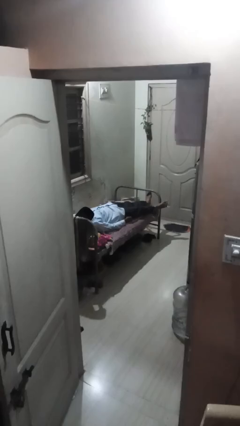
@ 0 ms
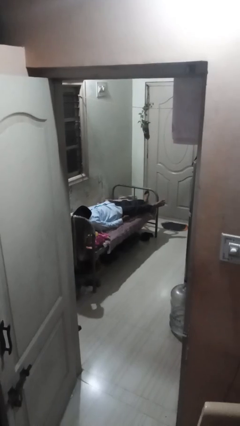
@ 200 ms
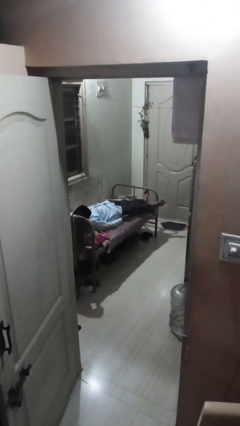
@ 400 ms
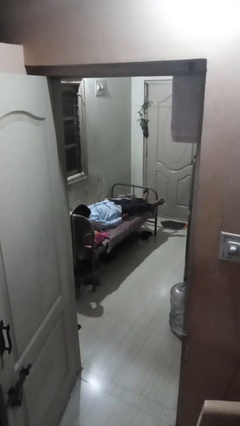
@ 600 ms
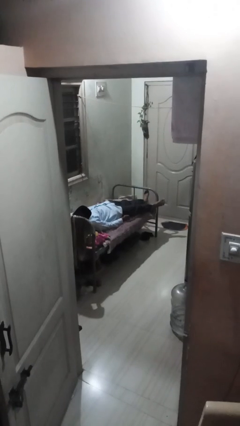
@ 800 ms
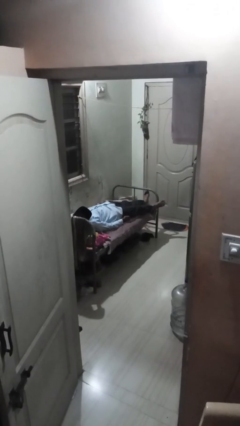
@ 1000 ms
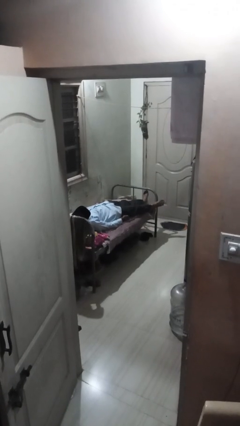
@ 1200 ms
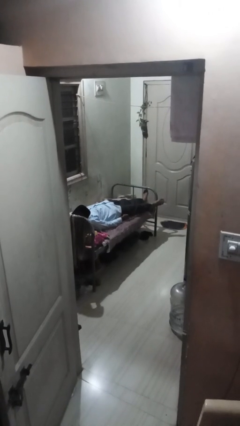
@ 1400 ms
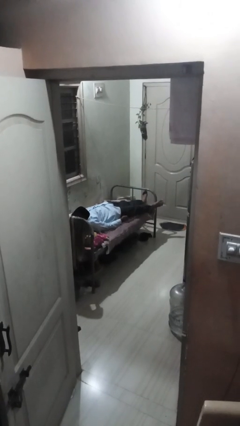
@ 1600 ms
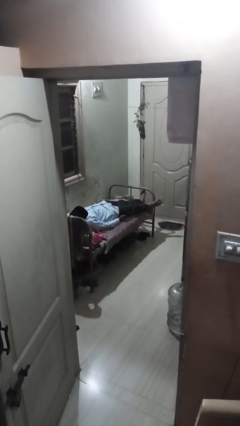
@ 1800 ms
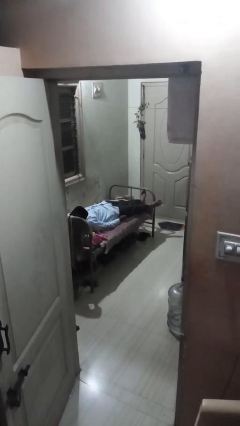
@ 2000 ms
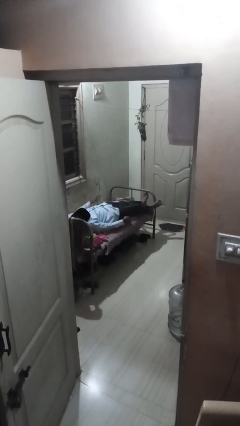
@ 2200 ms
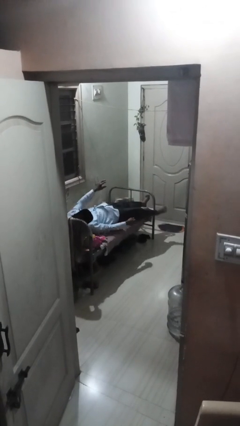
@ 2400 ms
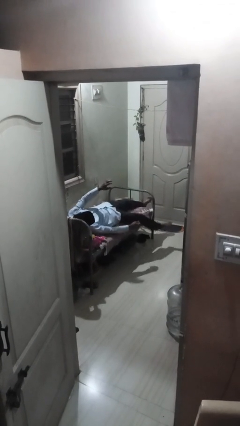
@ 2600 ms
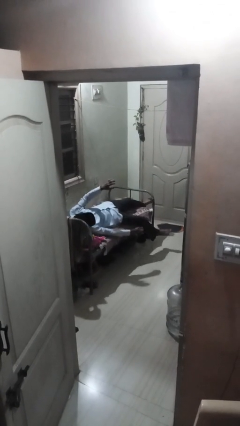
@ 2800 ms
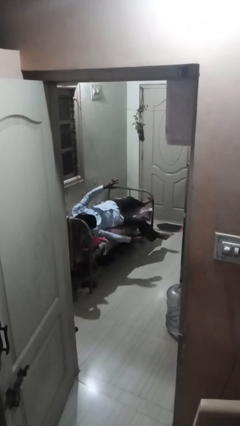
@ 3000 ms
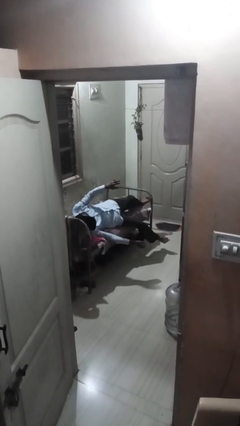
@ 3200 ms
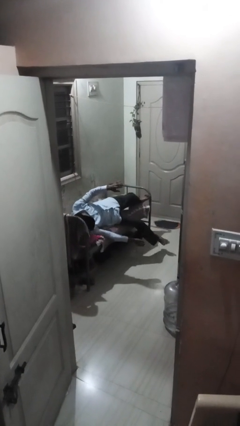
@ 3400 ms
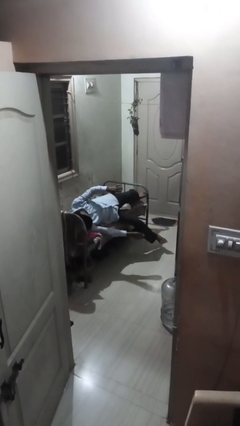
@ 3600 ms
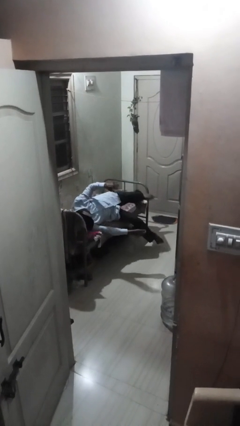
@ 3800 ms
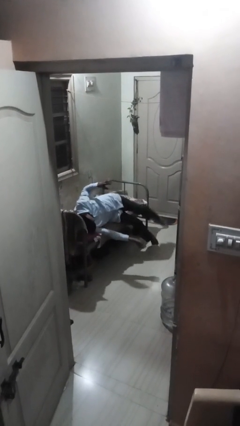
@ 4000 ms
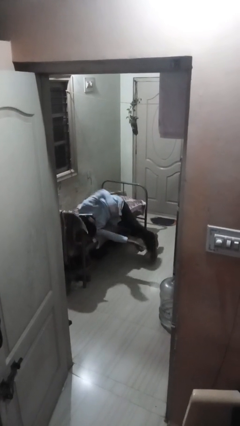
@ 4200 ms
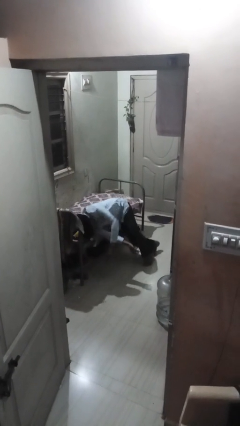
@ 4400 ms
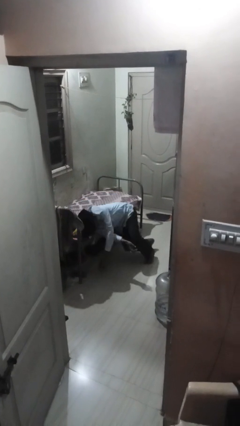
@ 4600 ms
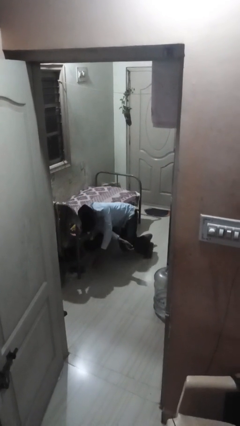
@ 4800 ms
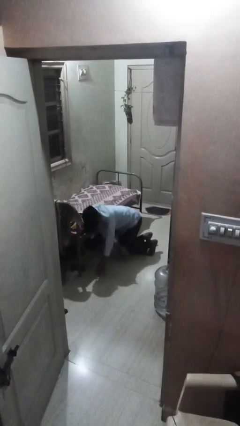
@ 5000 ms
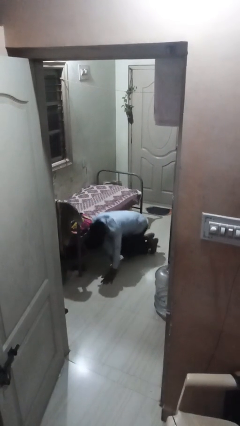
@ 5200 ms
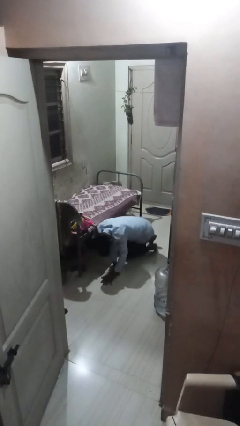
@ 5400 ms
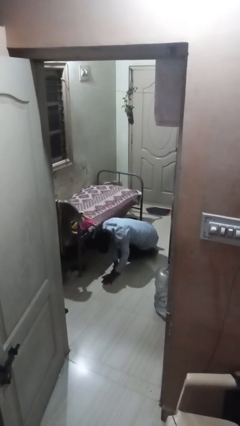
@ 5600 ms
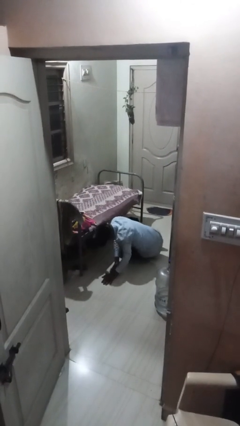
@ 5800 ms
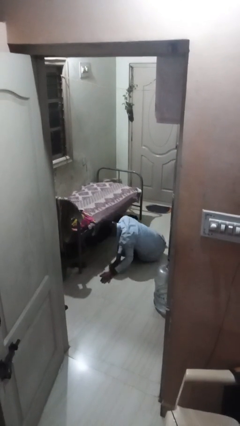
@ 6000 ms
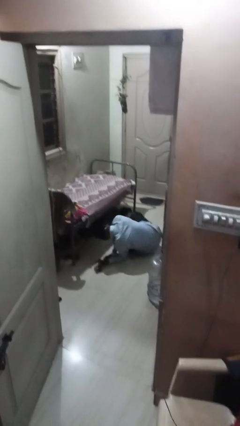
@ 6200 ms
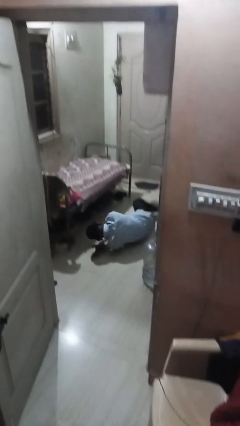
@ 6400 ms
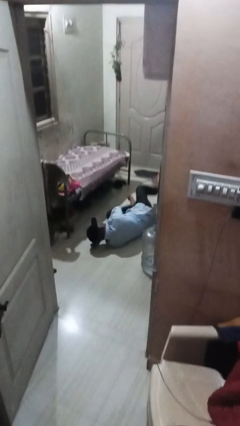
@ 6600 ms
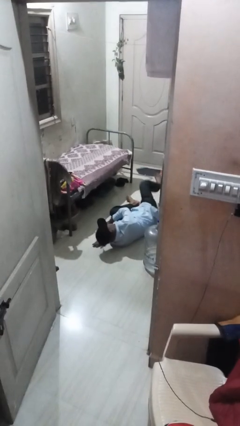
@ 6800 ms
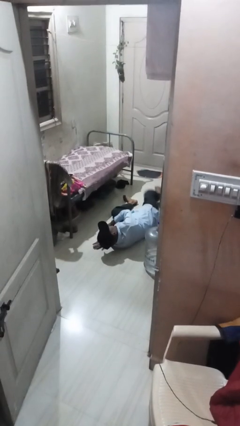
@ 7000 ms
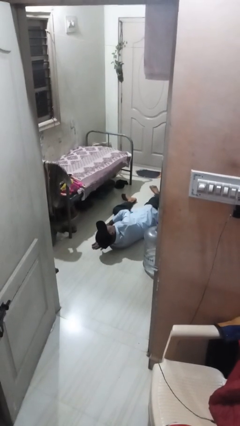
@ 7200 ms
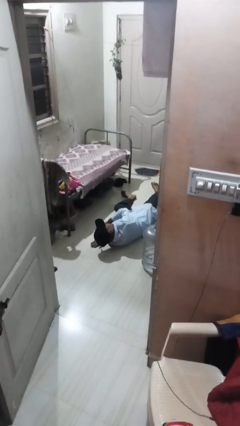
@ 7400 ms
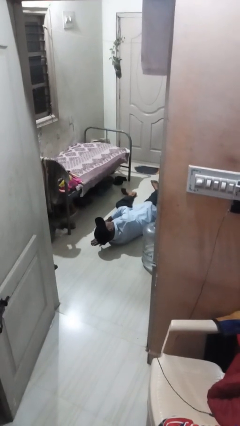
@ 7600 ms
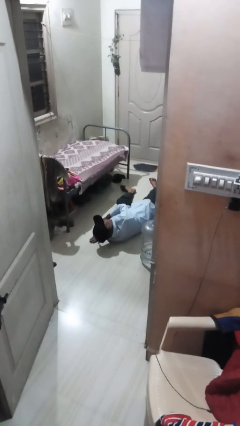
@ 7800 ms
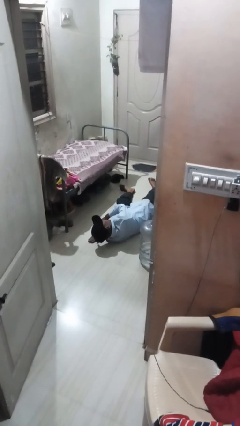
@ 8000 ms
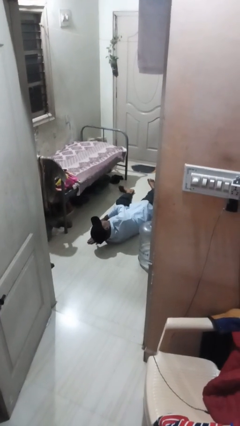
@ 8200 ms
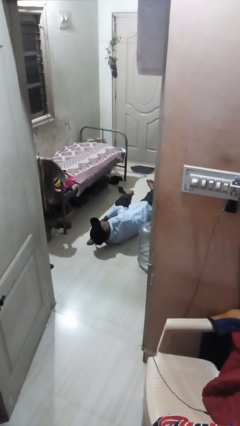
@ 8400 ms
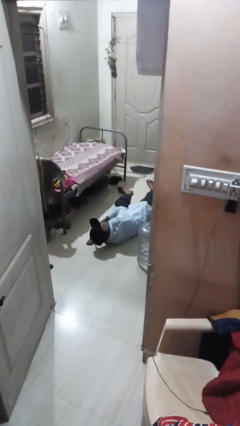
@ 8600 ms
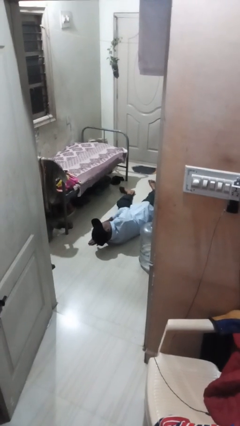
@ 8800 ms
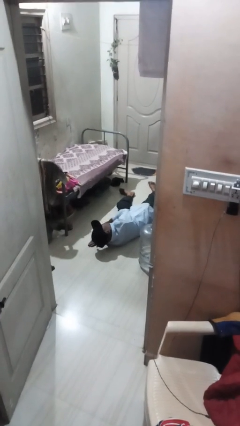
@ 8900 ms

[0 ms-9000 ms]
person falls from bed

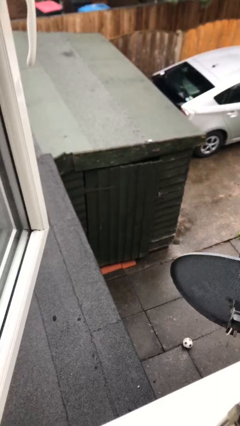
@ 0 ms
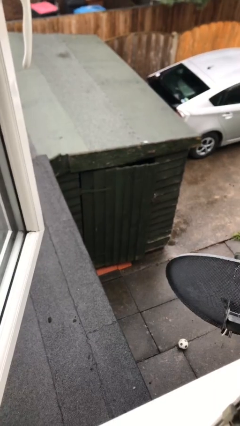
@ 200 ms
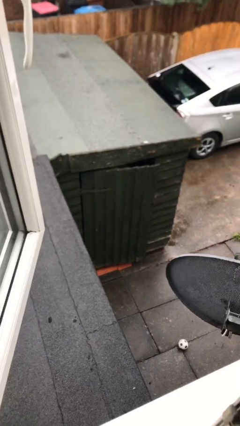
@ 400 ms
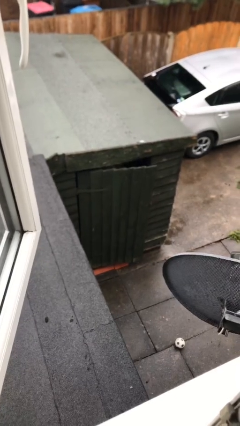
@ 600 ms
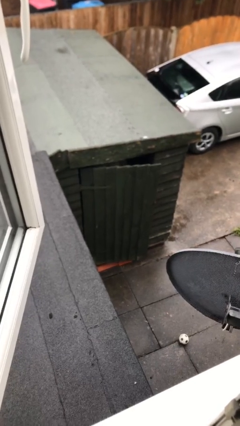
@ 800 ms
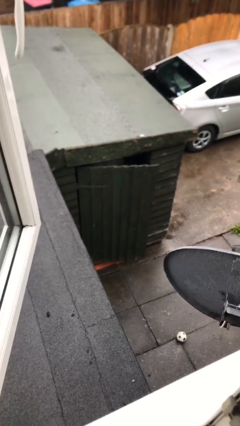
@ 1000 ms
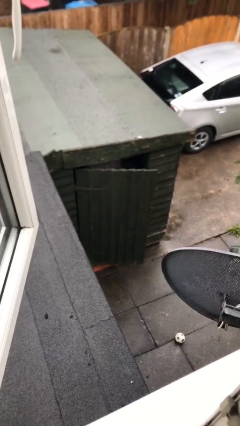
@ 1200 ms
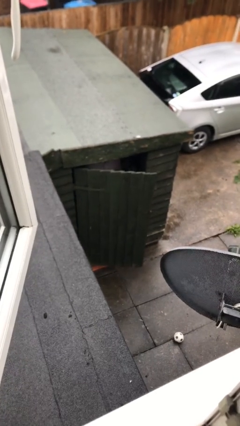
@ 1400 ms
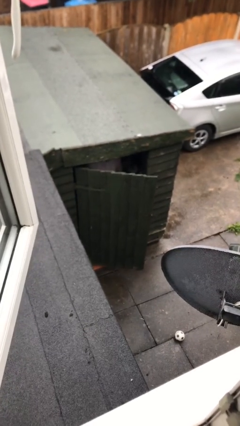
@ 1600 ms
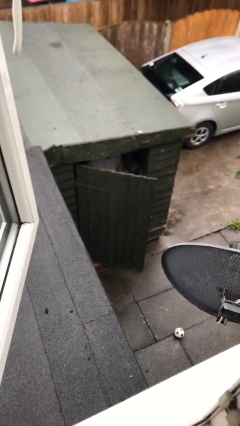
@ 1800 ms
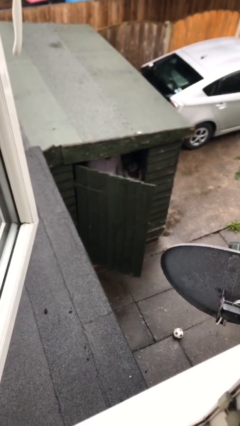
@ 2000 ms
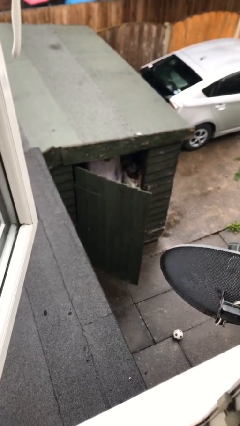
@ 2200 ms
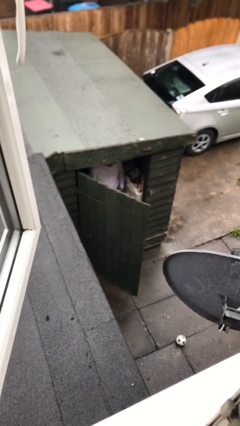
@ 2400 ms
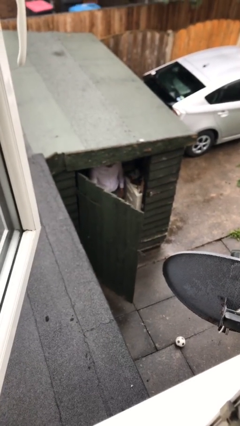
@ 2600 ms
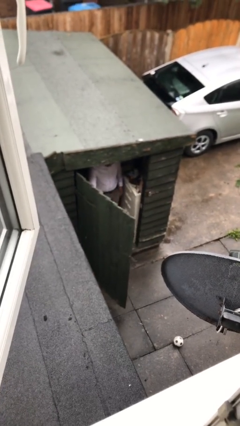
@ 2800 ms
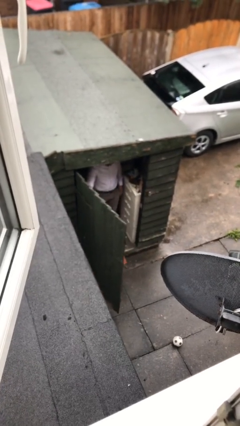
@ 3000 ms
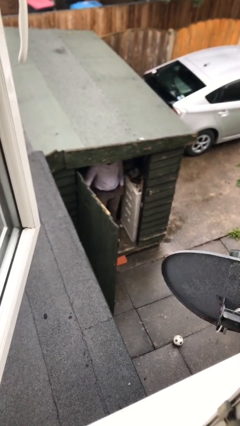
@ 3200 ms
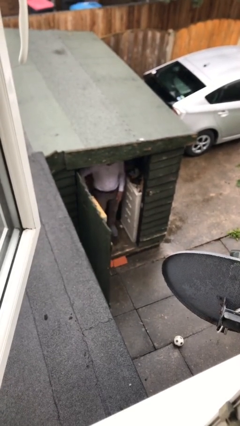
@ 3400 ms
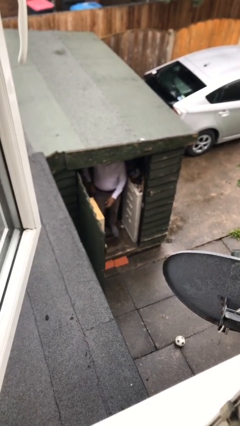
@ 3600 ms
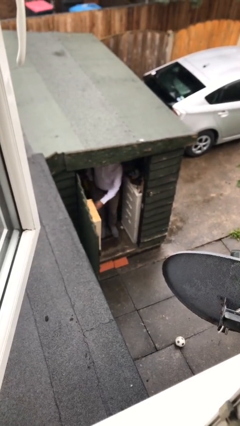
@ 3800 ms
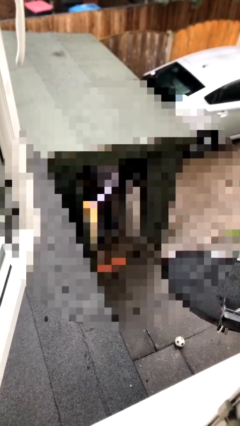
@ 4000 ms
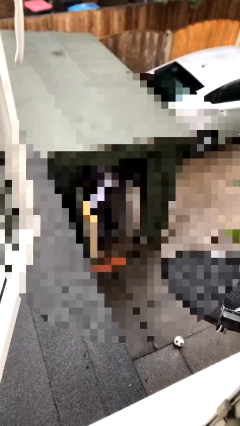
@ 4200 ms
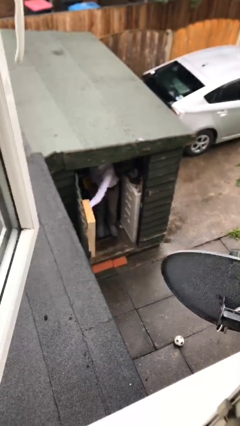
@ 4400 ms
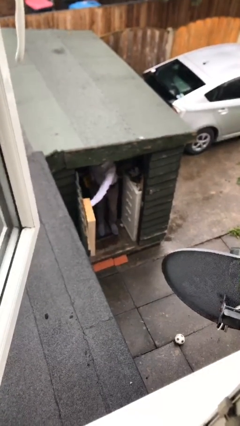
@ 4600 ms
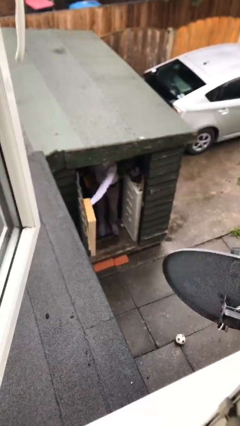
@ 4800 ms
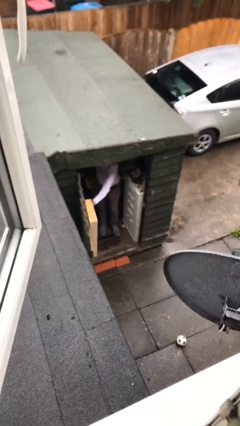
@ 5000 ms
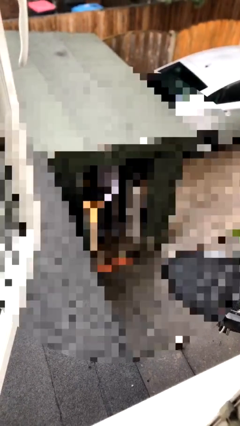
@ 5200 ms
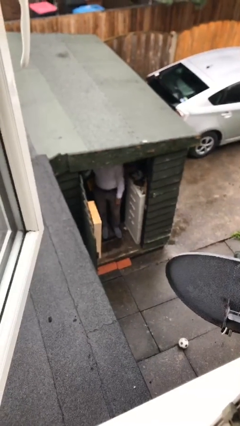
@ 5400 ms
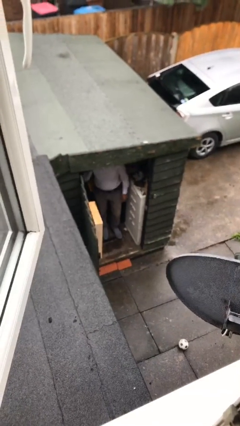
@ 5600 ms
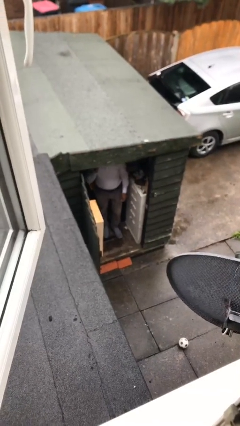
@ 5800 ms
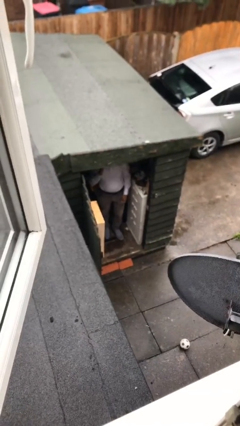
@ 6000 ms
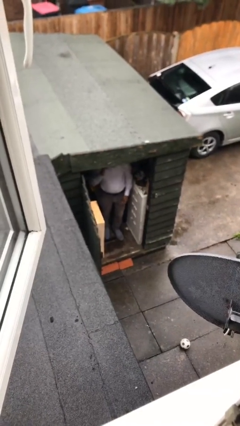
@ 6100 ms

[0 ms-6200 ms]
person opens facility door

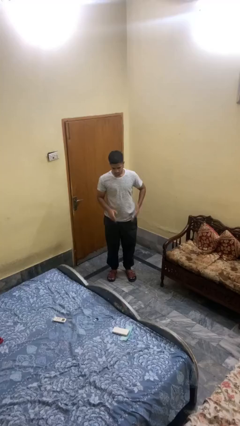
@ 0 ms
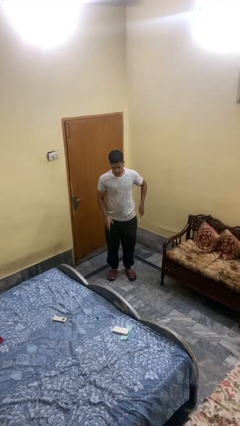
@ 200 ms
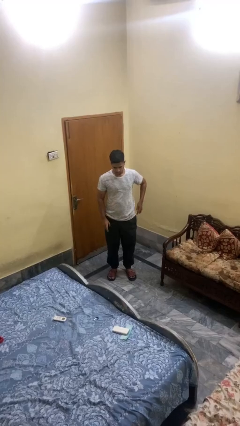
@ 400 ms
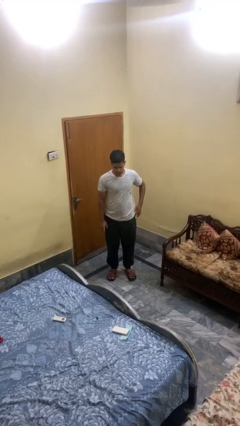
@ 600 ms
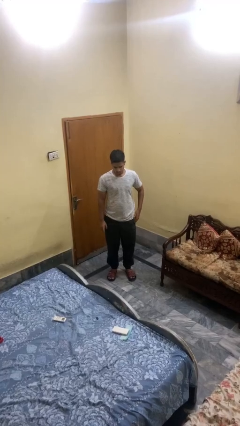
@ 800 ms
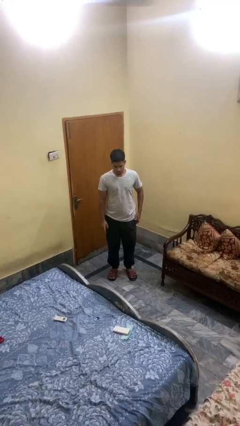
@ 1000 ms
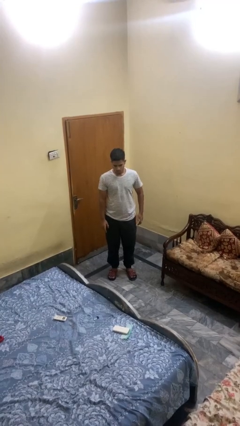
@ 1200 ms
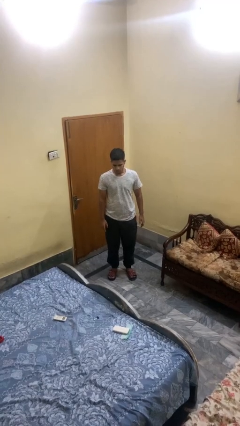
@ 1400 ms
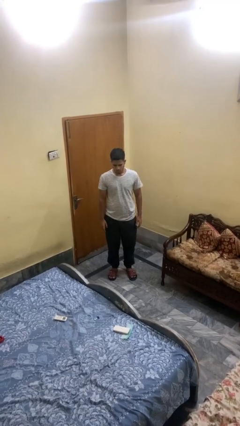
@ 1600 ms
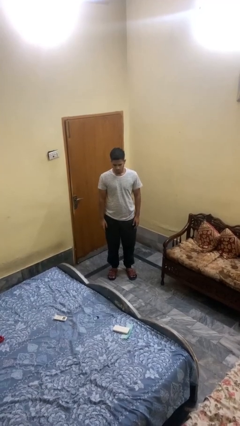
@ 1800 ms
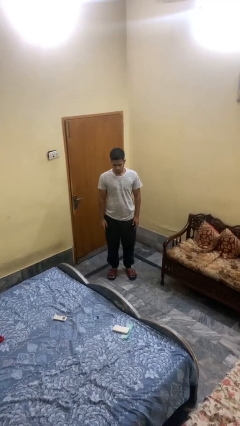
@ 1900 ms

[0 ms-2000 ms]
person puts phone into pocket

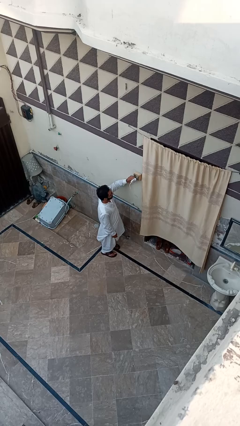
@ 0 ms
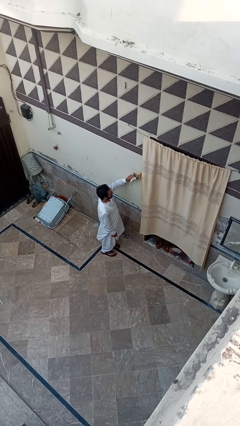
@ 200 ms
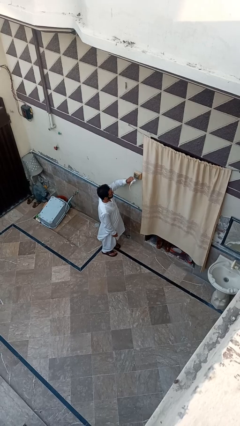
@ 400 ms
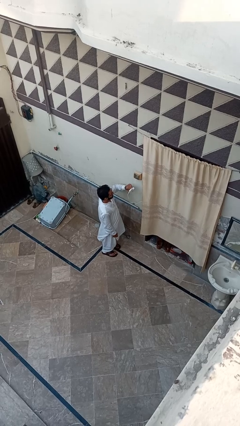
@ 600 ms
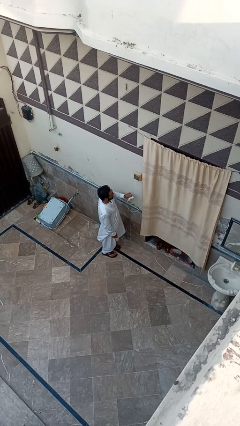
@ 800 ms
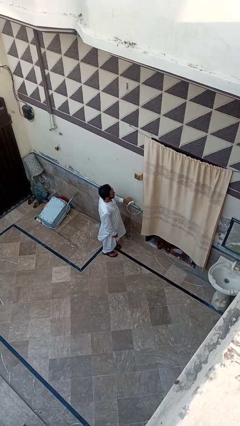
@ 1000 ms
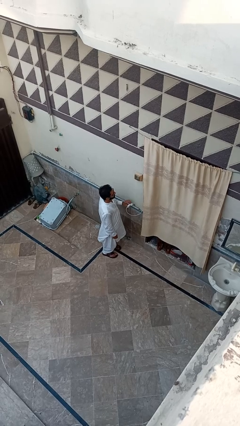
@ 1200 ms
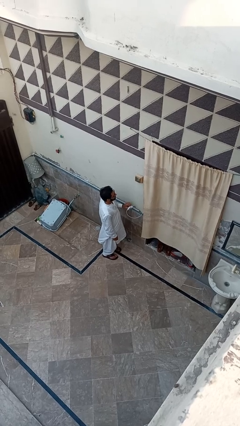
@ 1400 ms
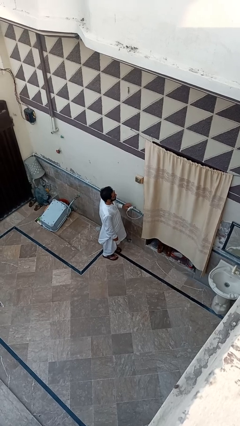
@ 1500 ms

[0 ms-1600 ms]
person unplugs from electrical socket
